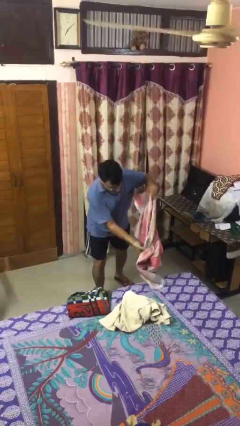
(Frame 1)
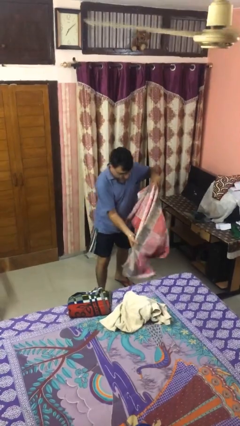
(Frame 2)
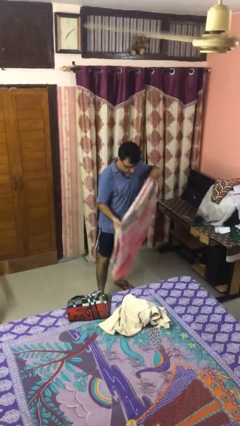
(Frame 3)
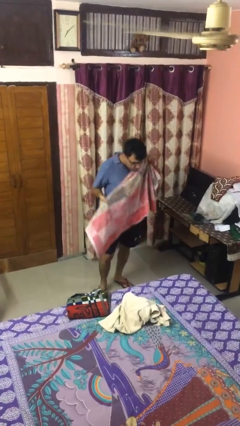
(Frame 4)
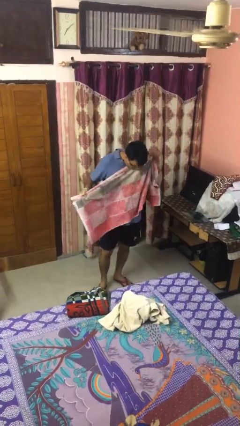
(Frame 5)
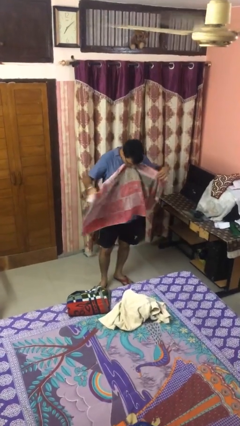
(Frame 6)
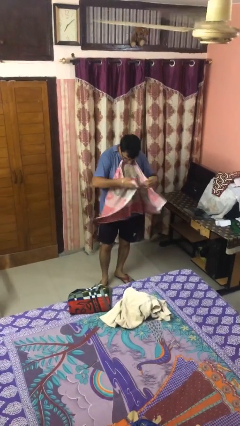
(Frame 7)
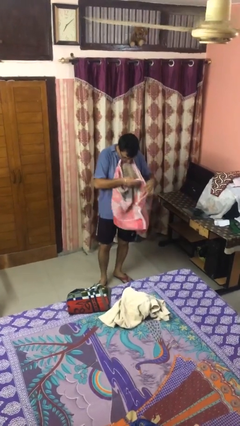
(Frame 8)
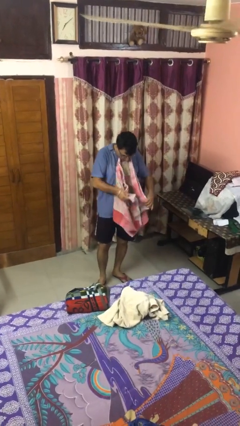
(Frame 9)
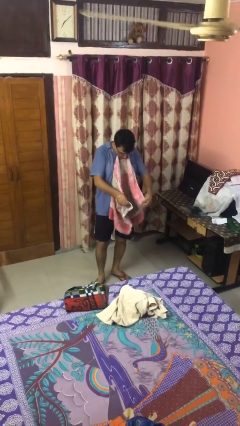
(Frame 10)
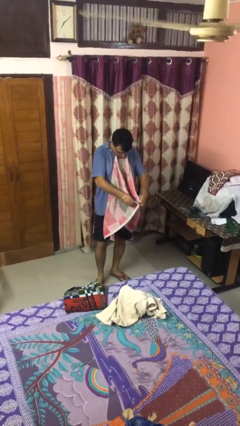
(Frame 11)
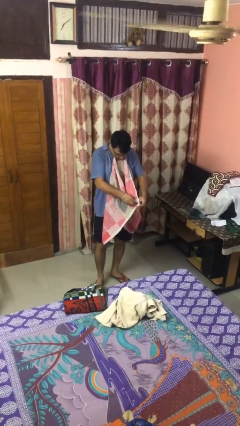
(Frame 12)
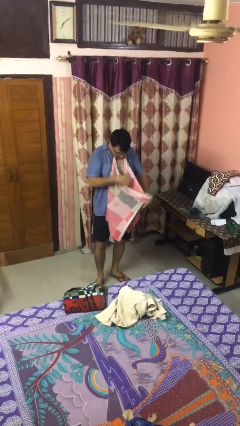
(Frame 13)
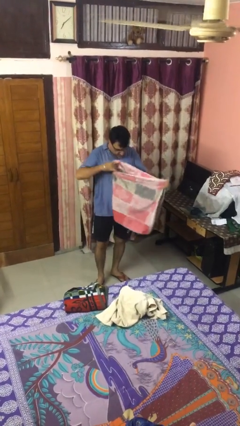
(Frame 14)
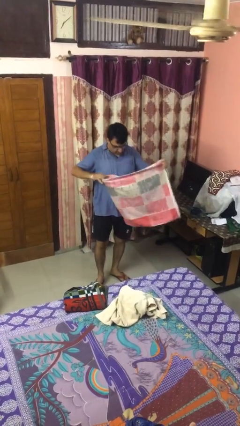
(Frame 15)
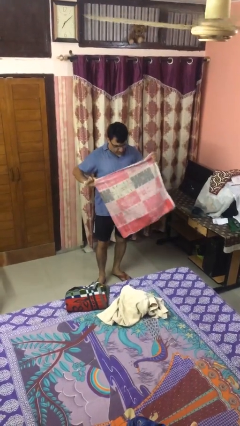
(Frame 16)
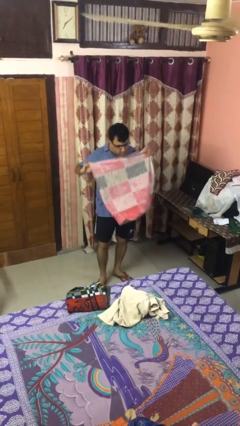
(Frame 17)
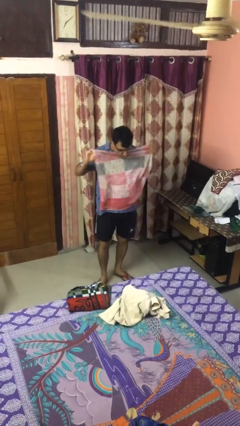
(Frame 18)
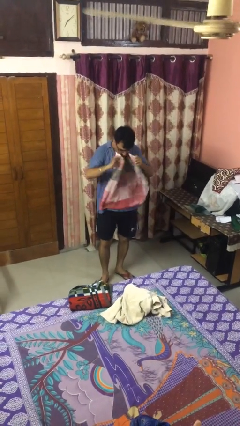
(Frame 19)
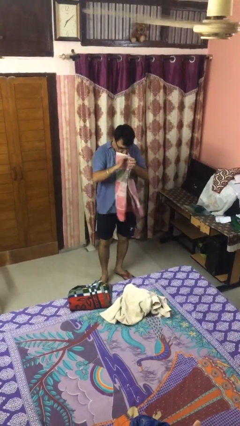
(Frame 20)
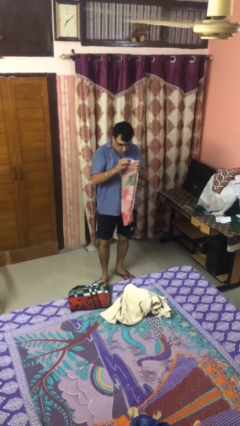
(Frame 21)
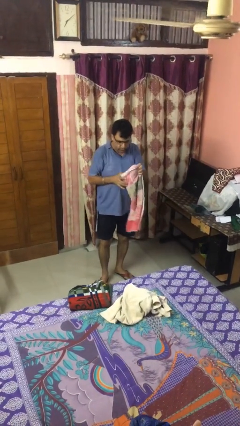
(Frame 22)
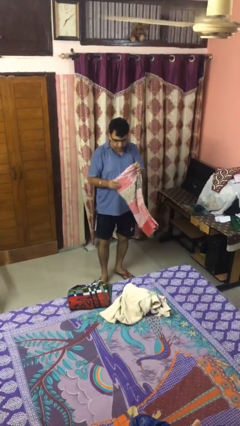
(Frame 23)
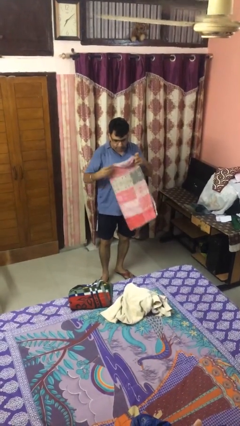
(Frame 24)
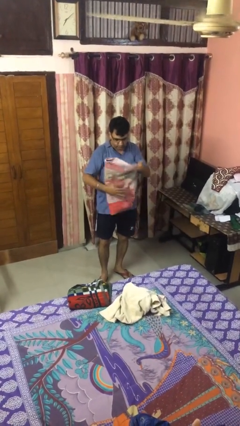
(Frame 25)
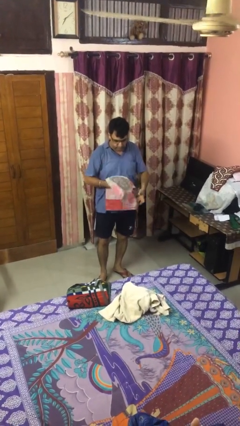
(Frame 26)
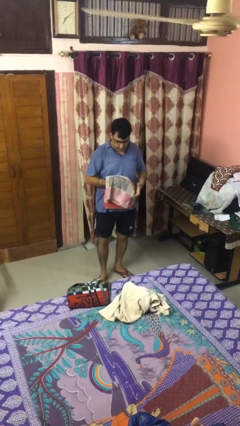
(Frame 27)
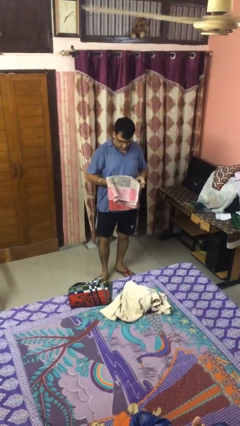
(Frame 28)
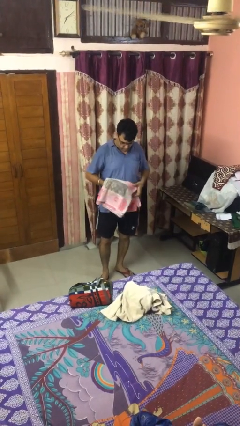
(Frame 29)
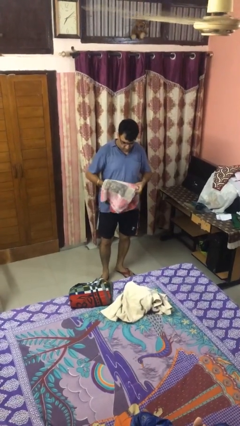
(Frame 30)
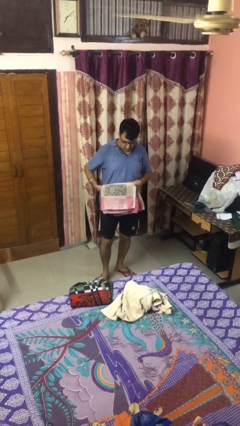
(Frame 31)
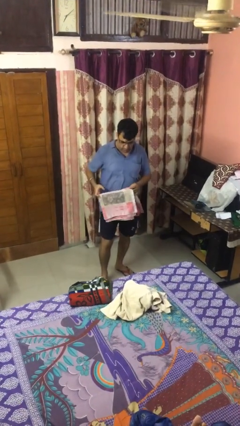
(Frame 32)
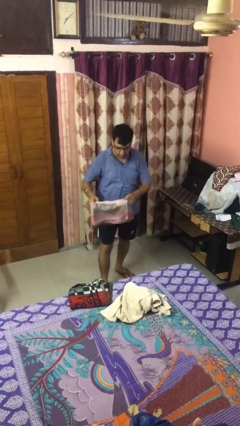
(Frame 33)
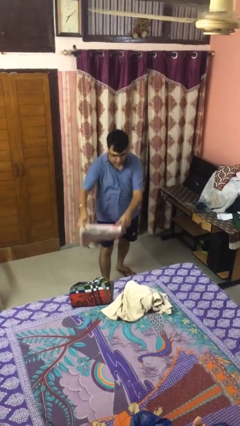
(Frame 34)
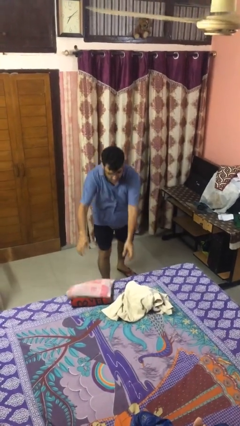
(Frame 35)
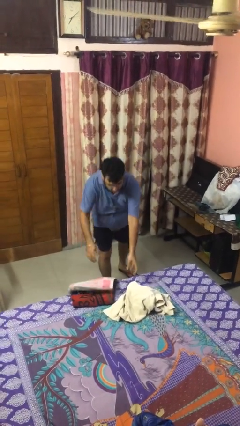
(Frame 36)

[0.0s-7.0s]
person folds towel

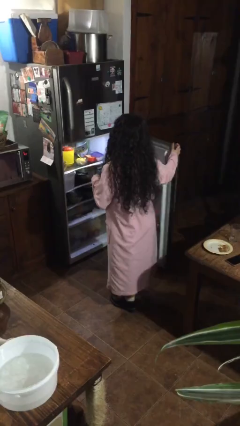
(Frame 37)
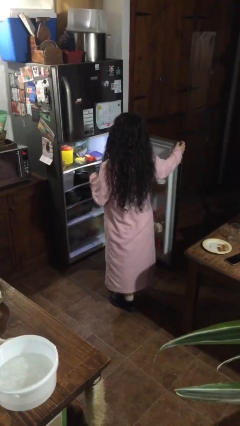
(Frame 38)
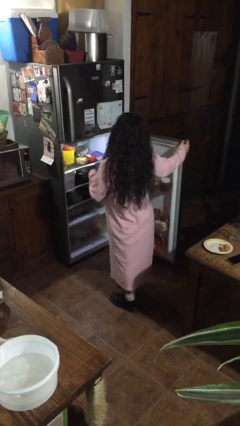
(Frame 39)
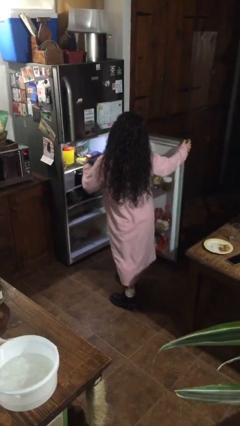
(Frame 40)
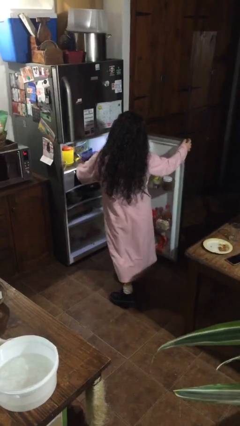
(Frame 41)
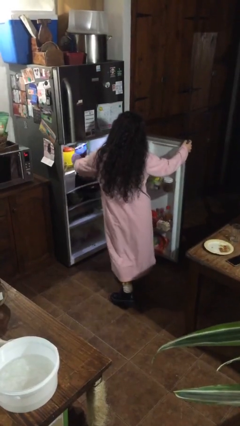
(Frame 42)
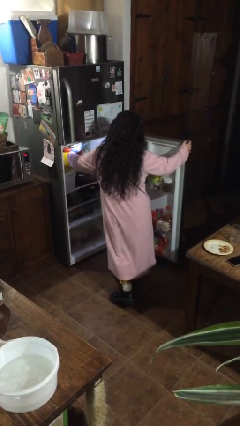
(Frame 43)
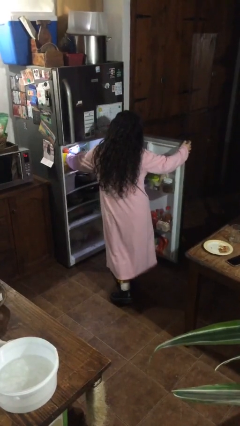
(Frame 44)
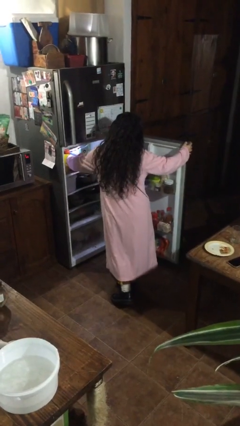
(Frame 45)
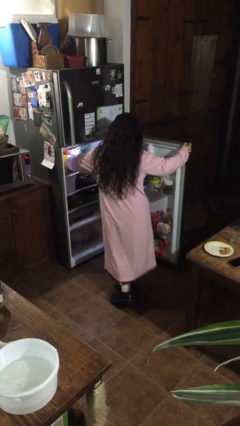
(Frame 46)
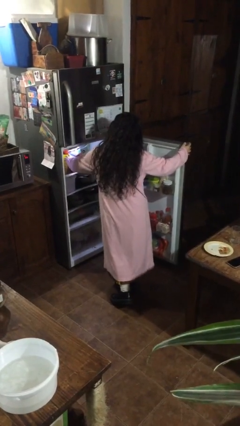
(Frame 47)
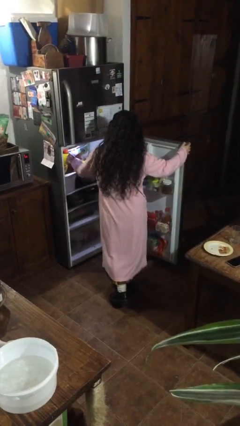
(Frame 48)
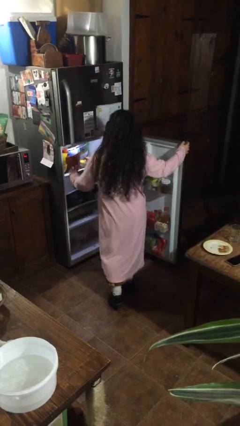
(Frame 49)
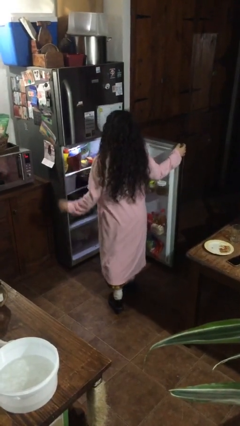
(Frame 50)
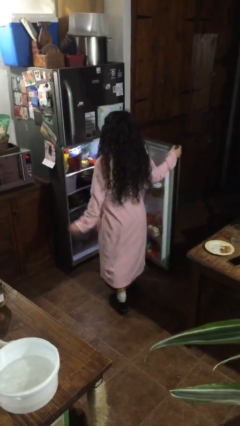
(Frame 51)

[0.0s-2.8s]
person puts object into refrigerator

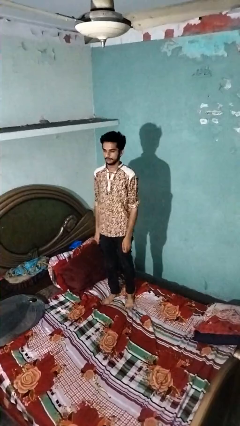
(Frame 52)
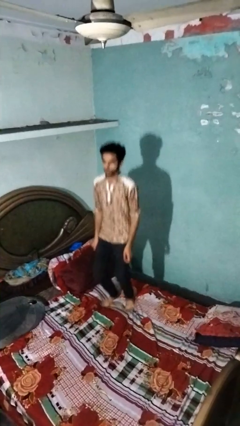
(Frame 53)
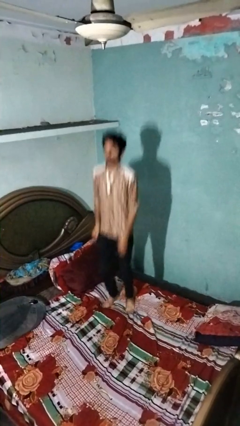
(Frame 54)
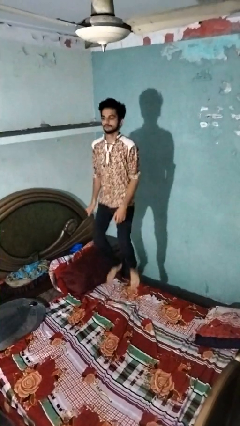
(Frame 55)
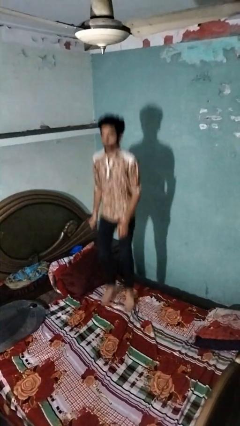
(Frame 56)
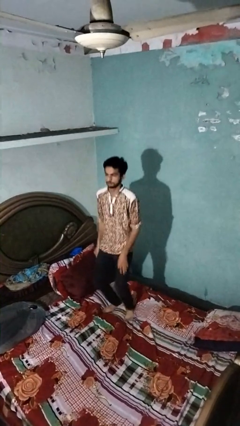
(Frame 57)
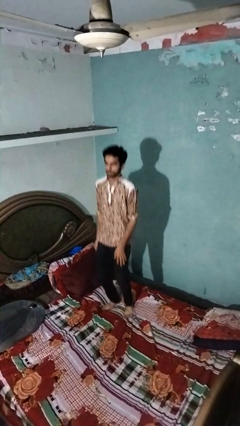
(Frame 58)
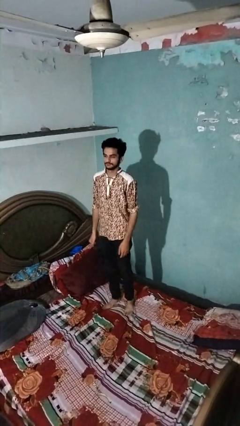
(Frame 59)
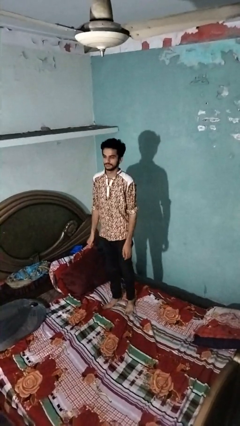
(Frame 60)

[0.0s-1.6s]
person jumps on bed

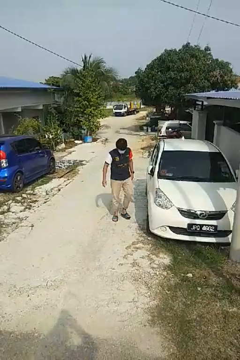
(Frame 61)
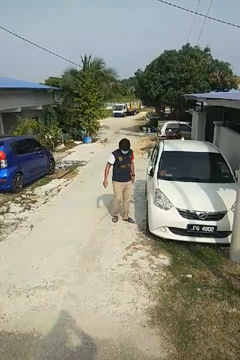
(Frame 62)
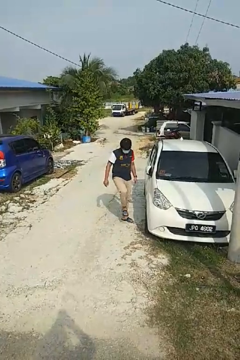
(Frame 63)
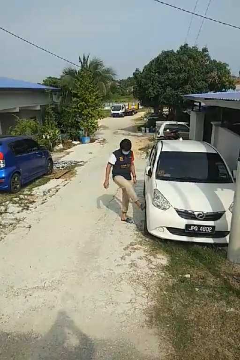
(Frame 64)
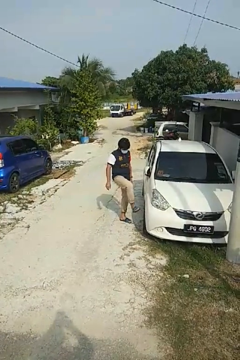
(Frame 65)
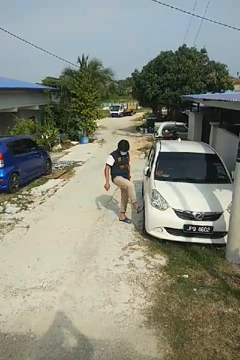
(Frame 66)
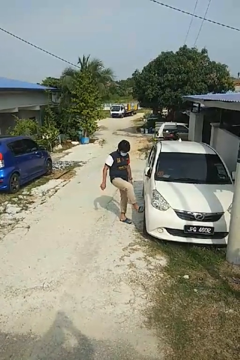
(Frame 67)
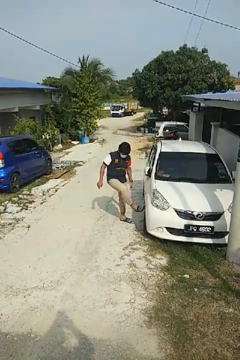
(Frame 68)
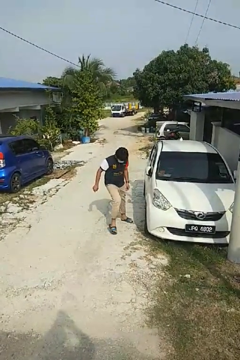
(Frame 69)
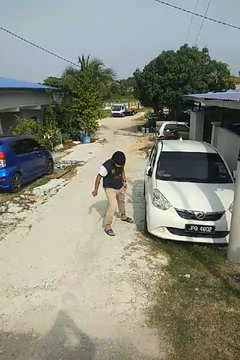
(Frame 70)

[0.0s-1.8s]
person kicks car tires

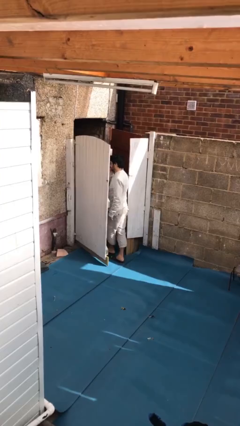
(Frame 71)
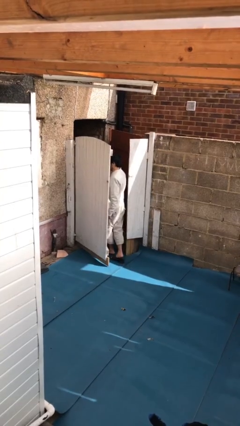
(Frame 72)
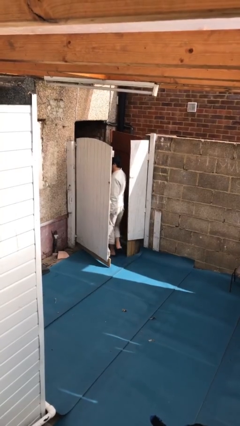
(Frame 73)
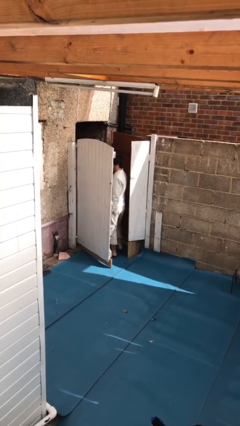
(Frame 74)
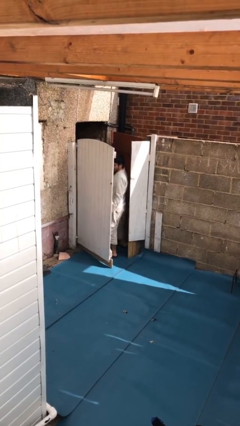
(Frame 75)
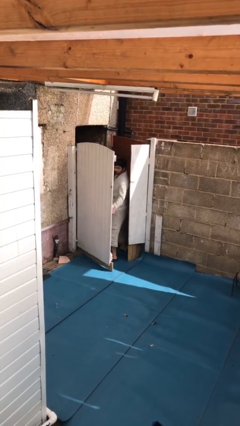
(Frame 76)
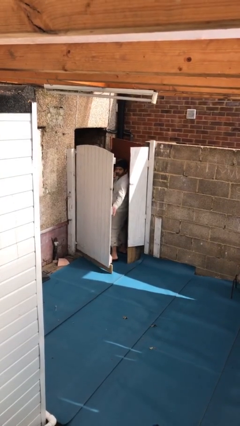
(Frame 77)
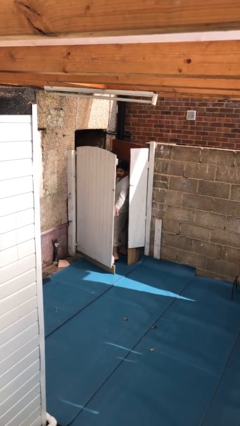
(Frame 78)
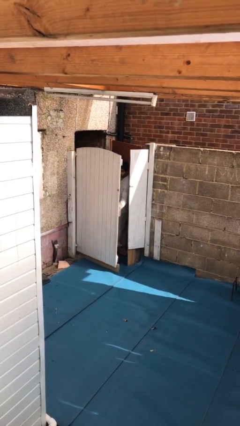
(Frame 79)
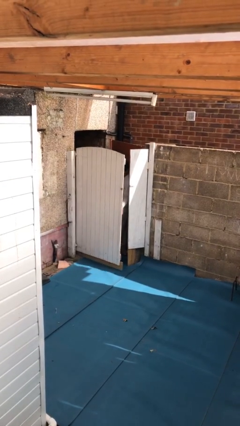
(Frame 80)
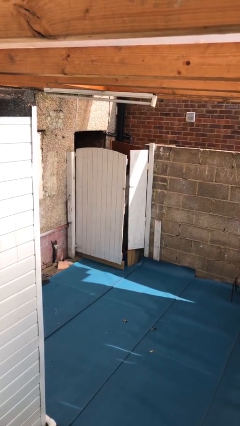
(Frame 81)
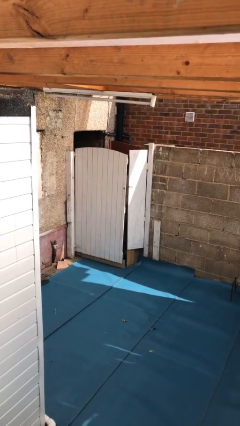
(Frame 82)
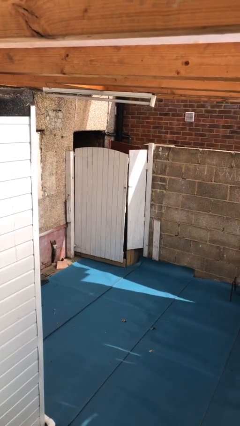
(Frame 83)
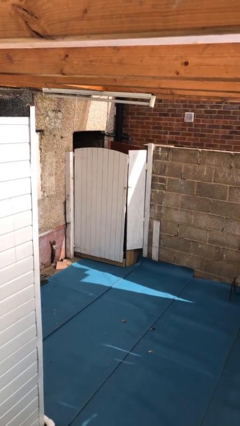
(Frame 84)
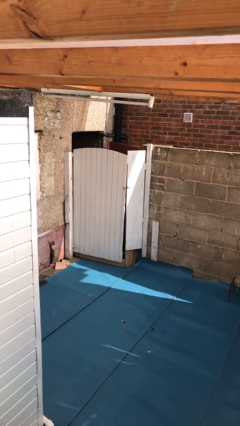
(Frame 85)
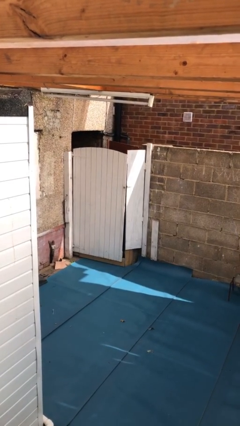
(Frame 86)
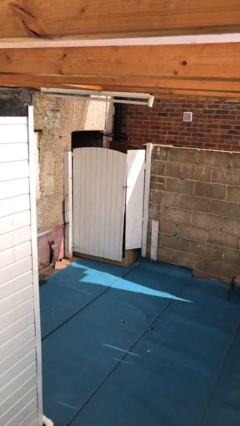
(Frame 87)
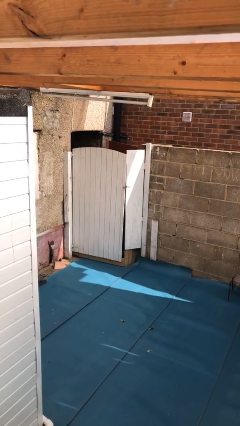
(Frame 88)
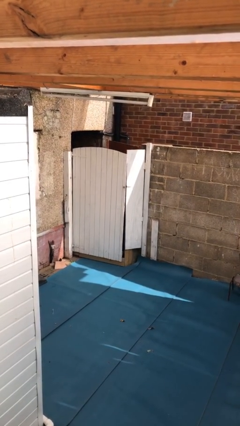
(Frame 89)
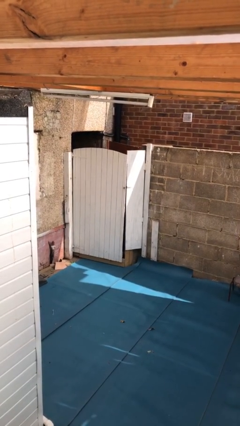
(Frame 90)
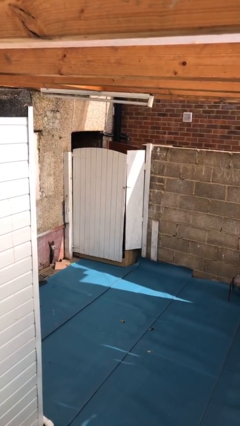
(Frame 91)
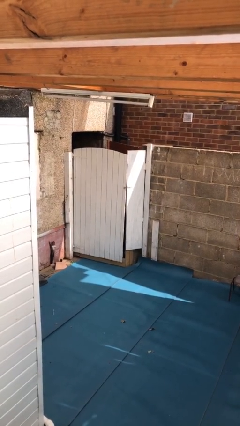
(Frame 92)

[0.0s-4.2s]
person closes facility door
